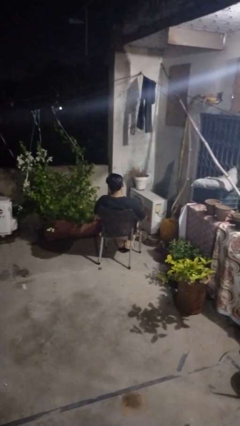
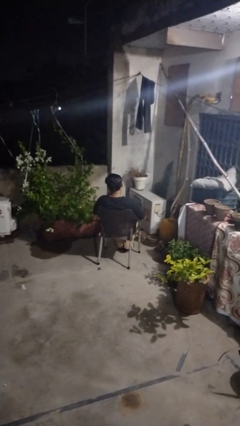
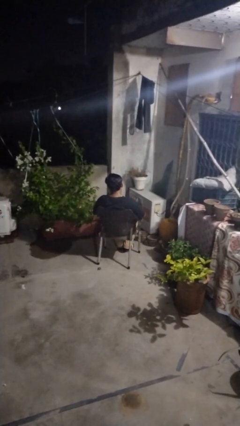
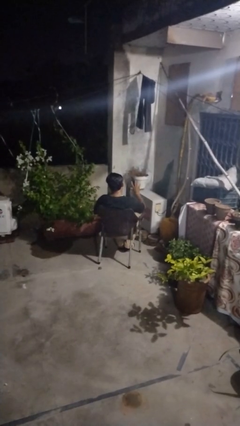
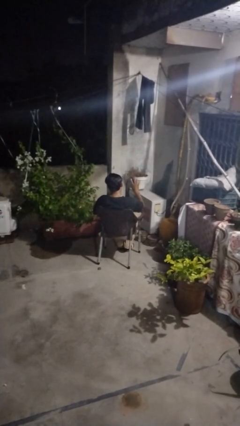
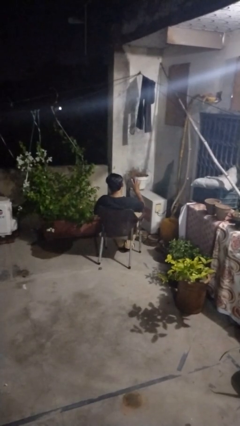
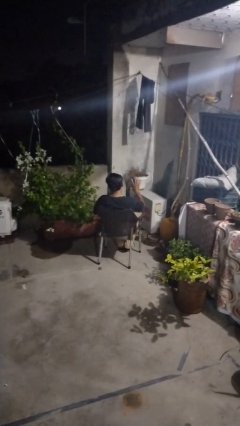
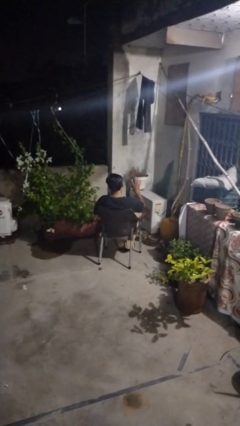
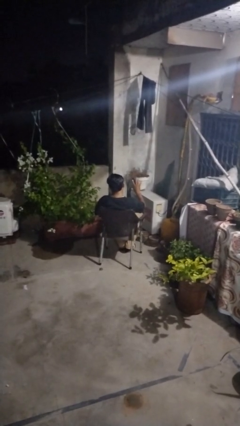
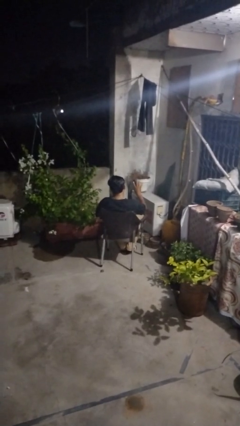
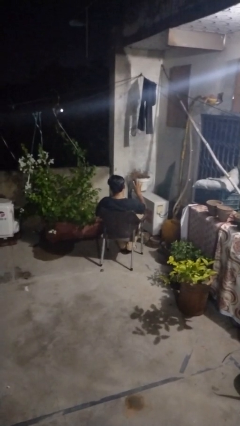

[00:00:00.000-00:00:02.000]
person gestures number four

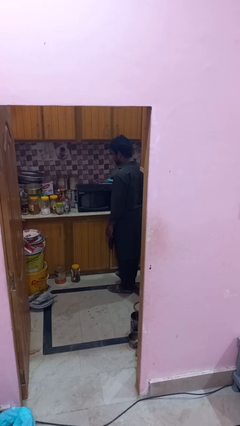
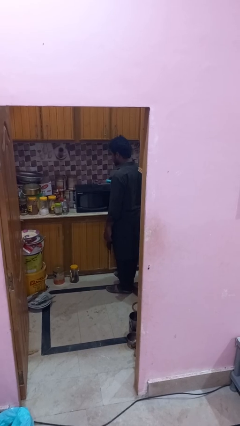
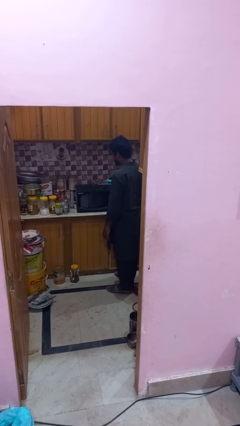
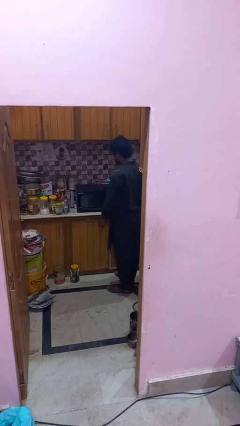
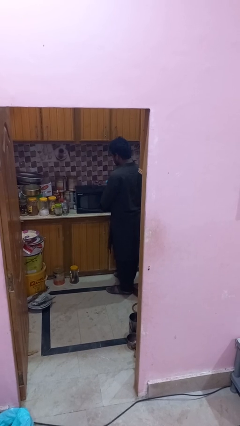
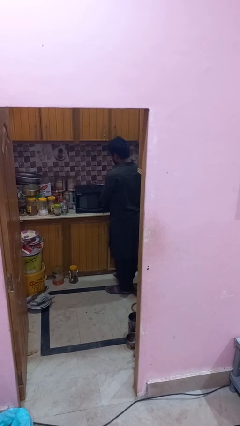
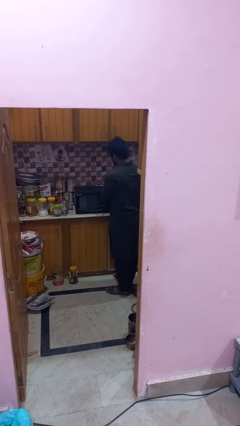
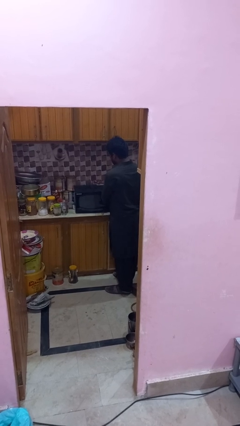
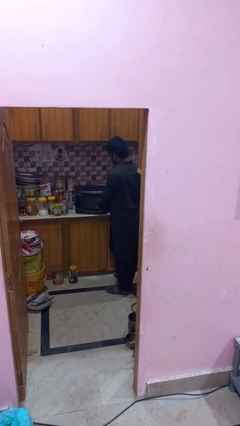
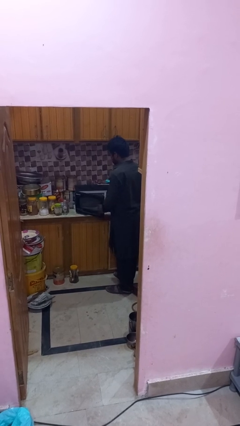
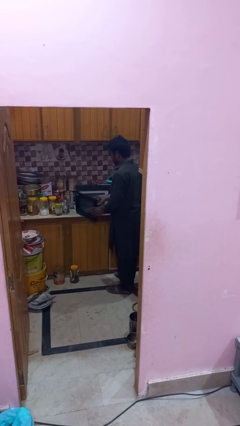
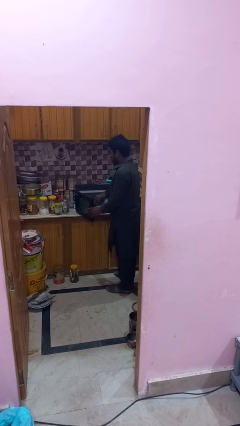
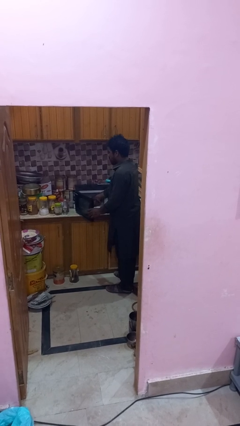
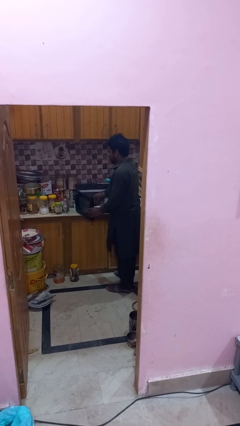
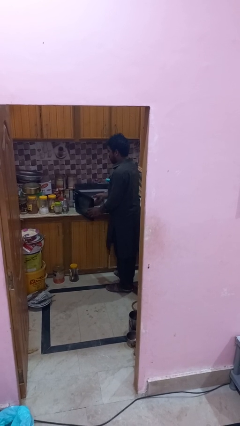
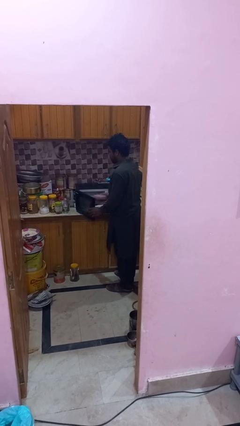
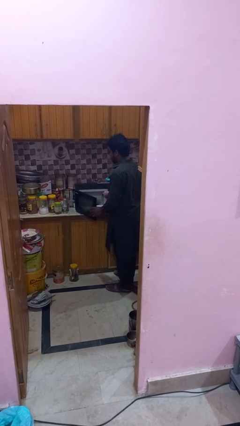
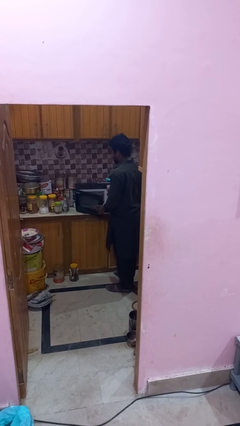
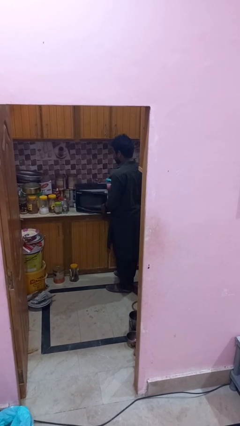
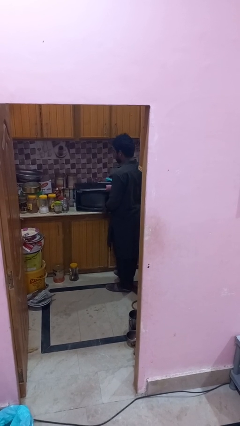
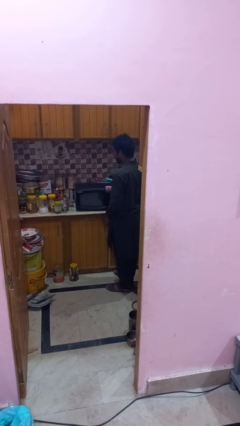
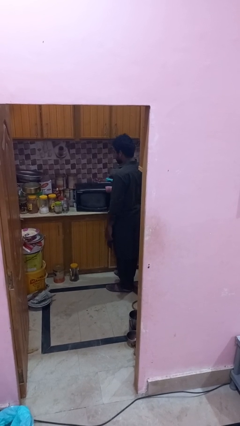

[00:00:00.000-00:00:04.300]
person takes object from microwave

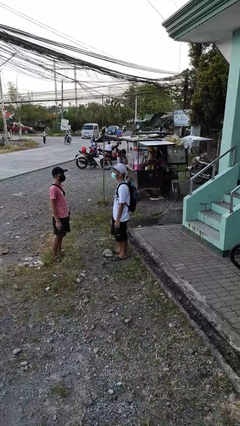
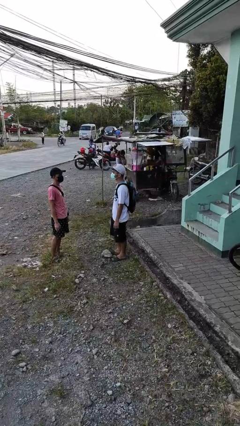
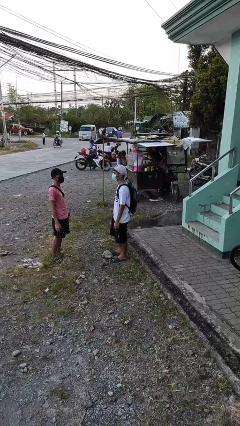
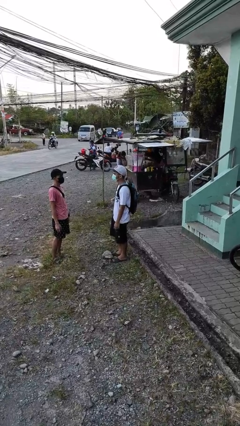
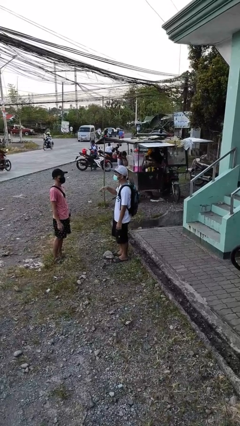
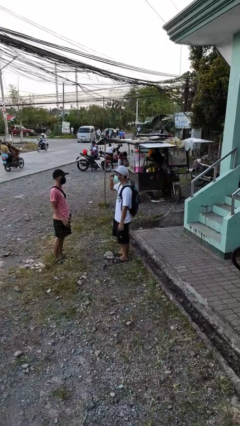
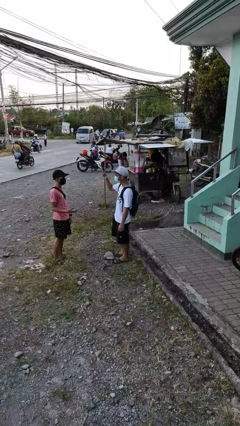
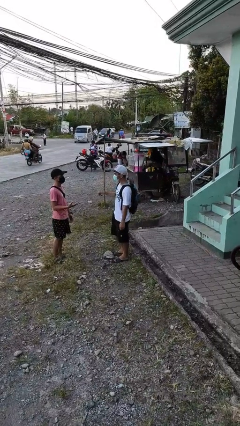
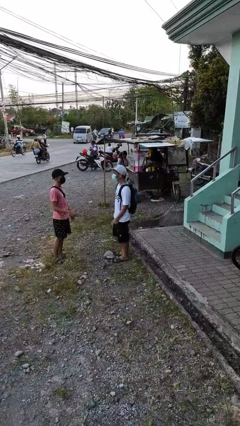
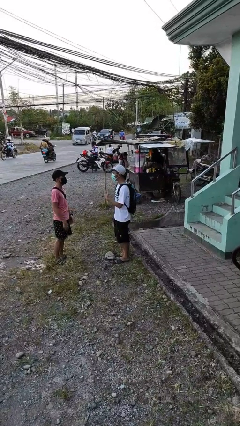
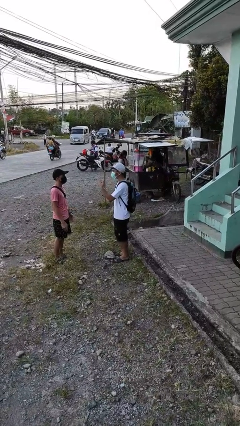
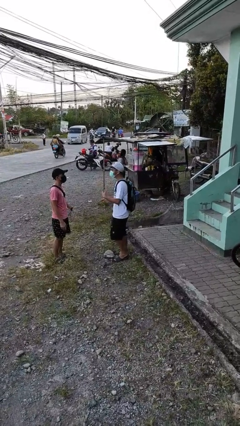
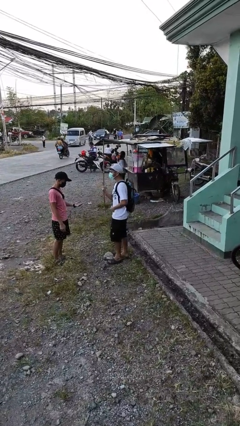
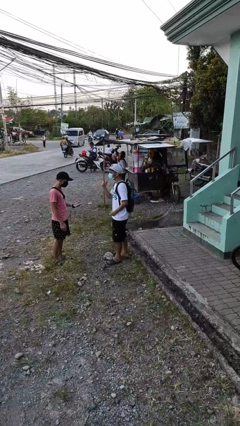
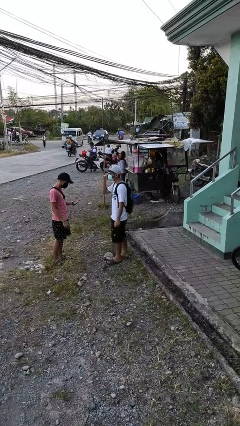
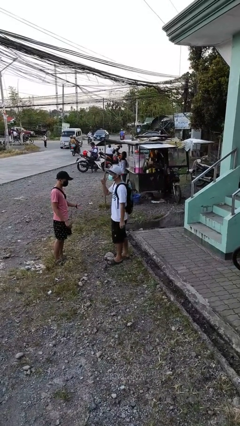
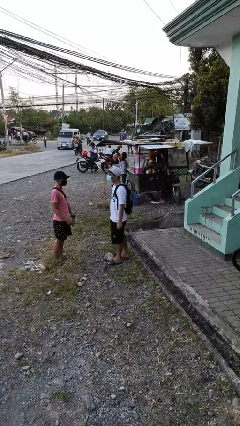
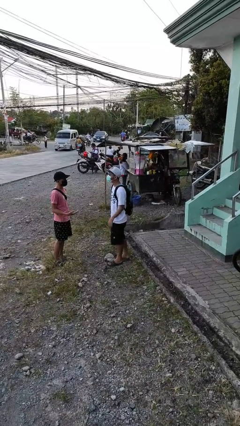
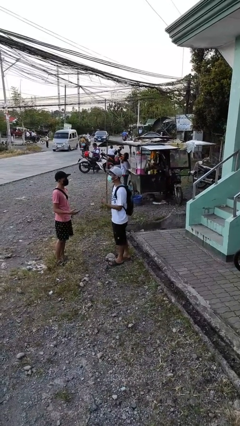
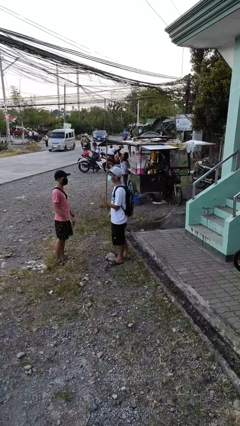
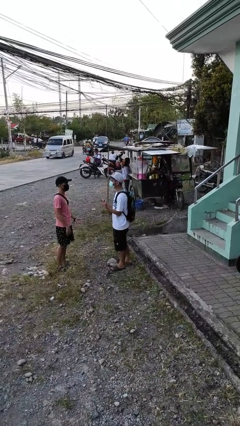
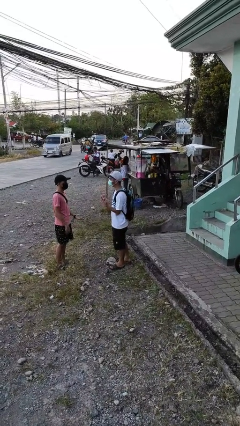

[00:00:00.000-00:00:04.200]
person talks to person

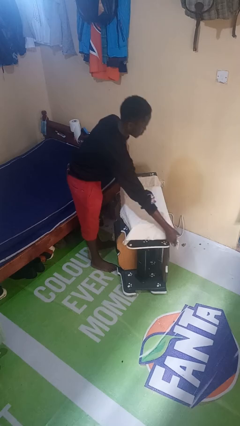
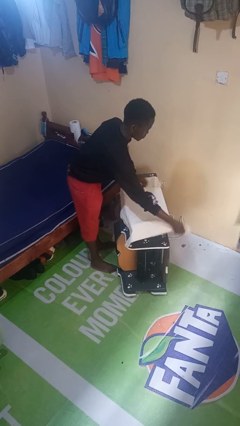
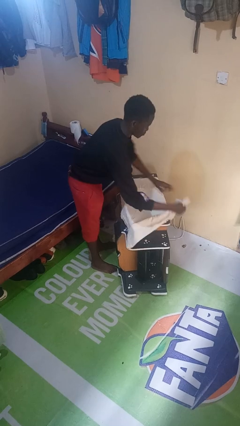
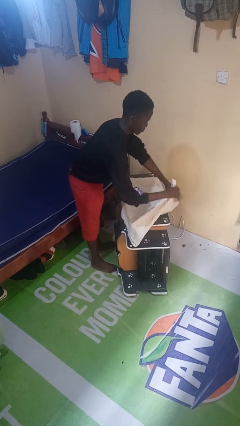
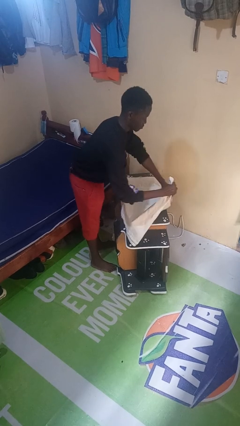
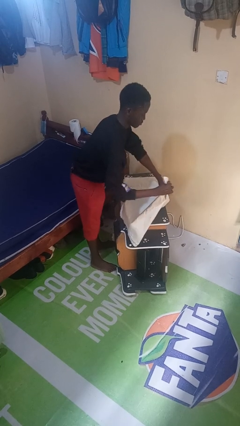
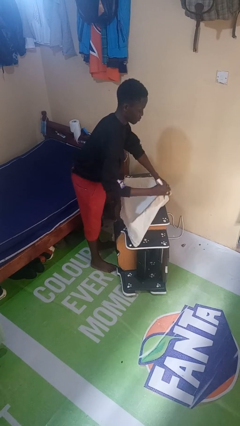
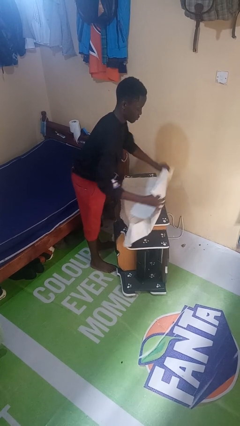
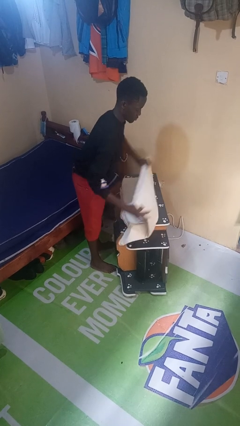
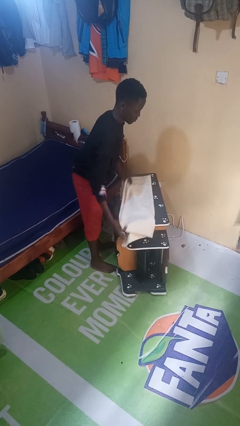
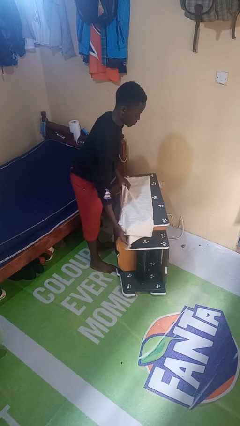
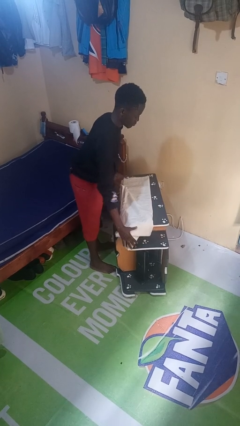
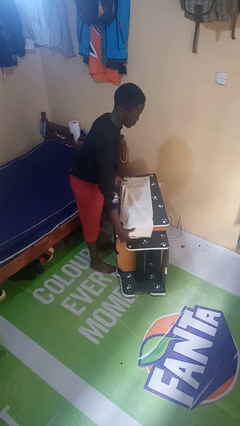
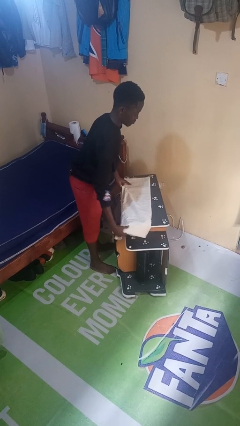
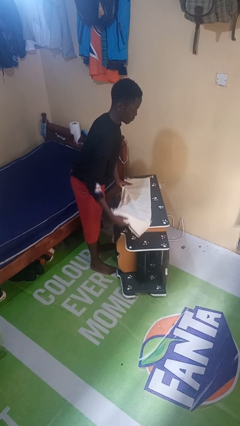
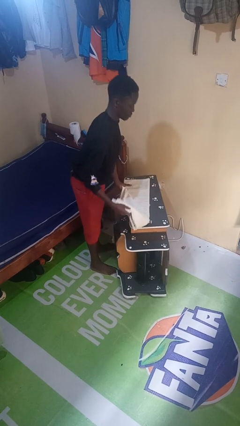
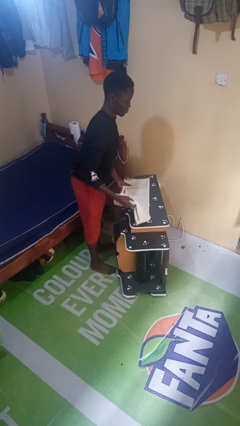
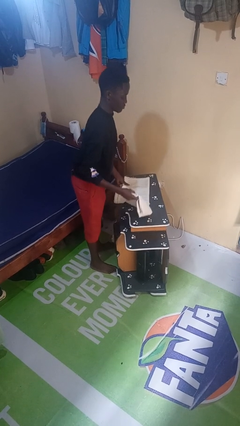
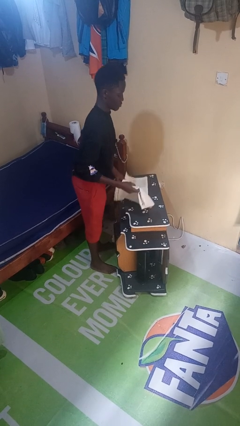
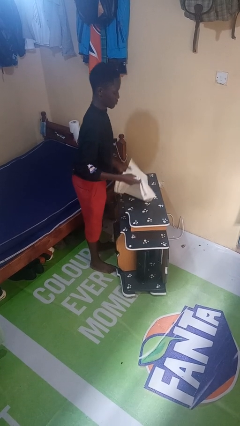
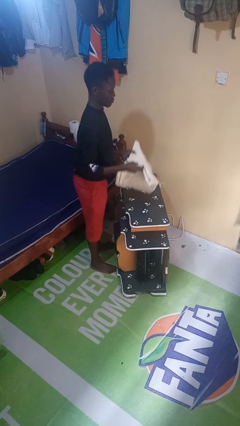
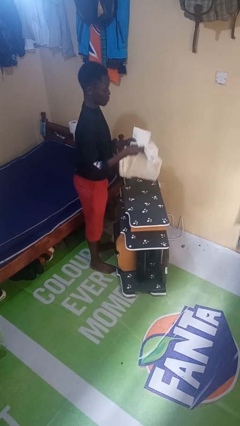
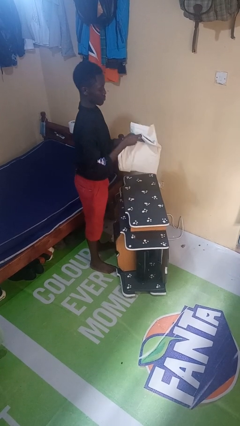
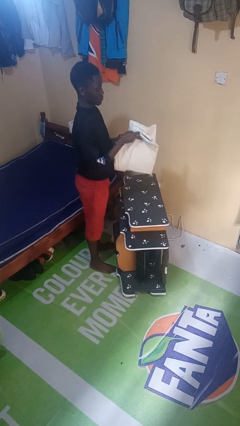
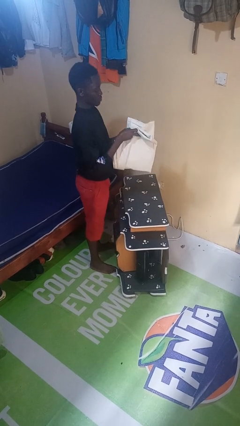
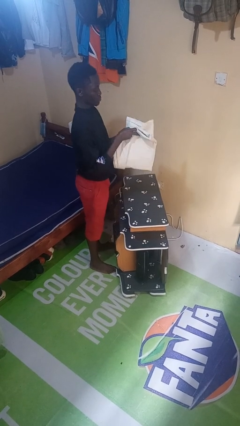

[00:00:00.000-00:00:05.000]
person folds tablecloth

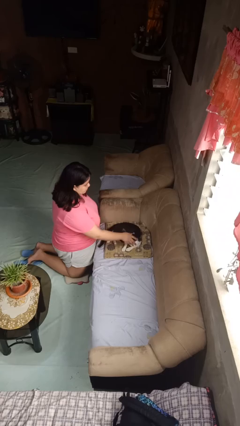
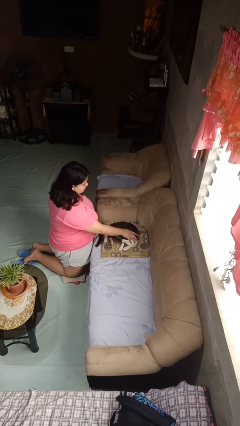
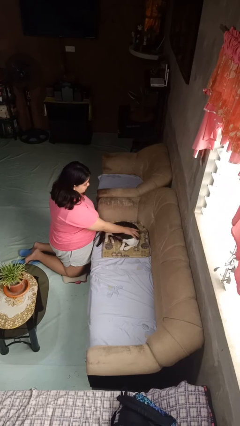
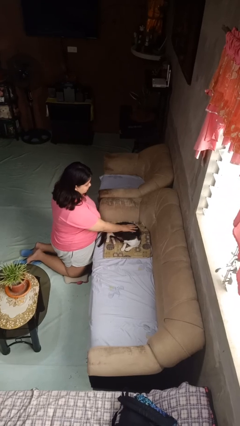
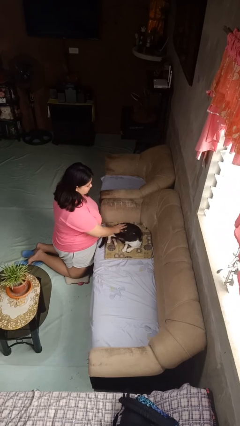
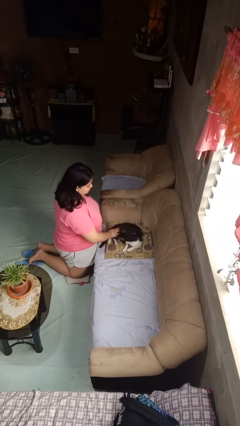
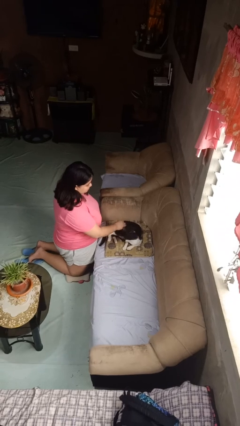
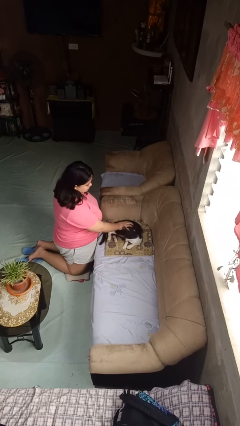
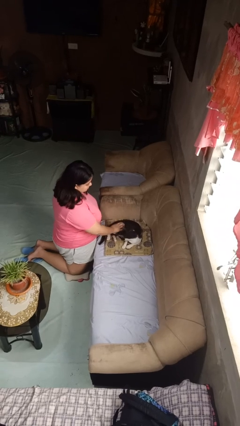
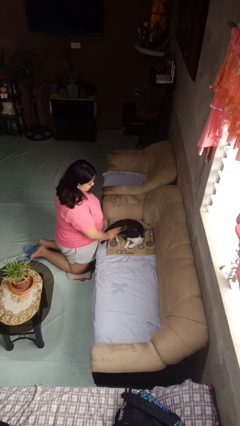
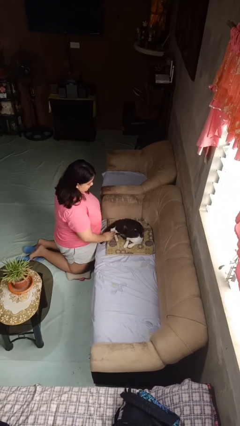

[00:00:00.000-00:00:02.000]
person pets cat

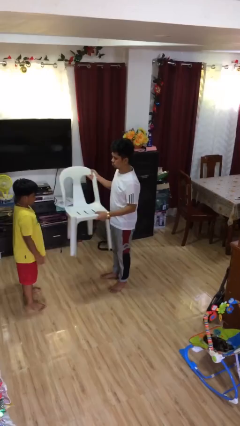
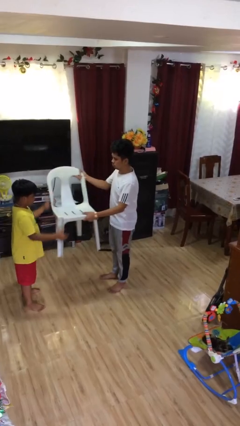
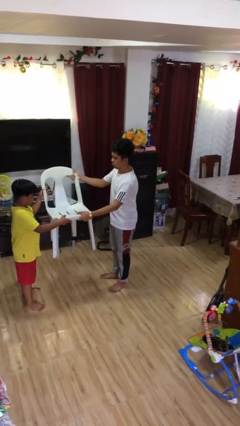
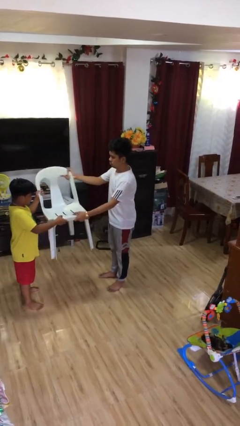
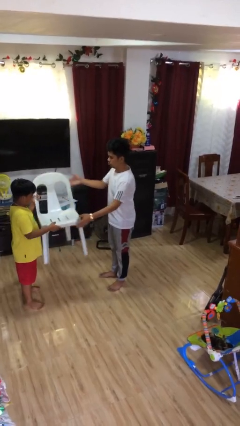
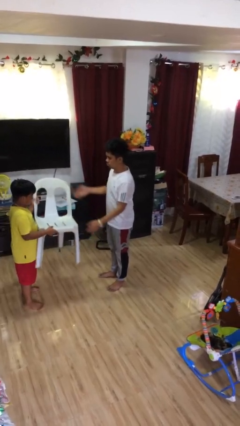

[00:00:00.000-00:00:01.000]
person transfers object to person
